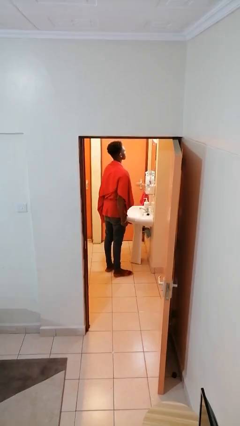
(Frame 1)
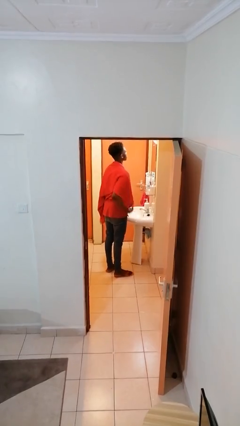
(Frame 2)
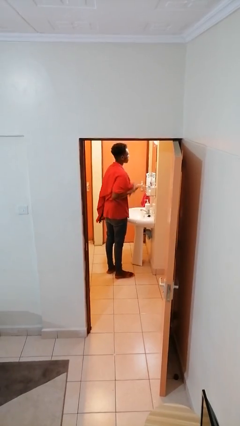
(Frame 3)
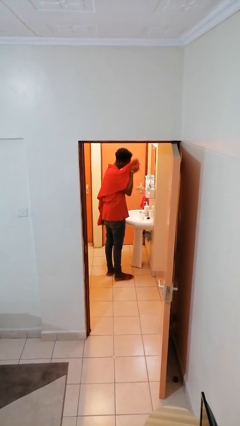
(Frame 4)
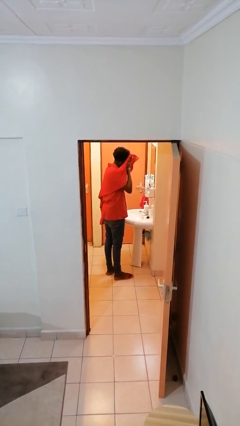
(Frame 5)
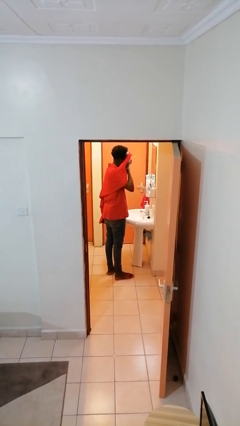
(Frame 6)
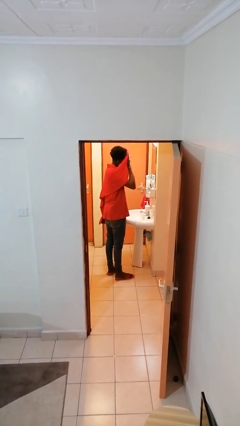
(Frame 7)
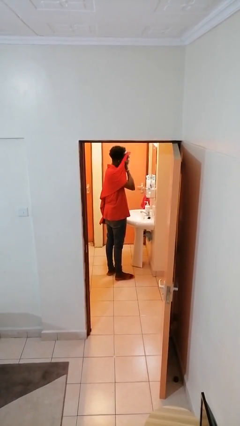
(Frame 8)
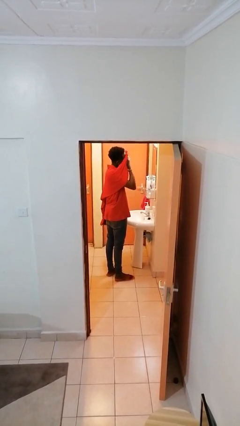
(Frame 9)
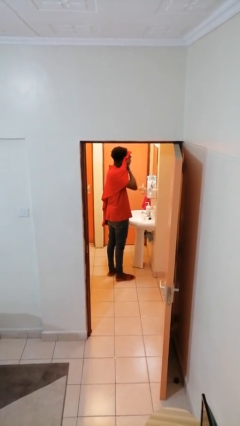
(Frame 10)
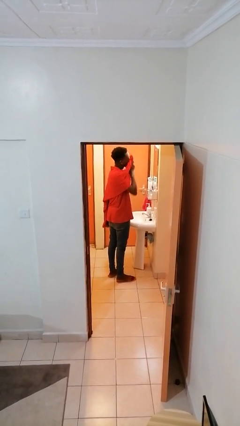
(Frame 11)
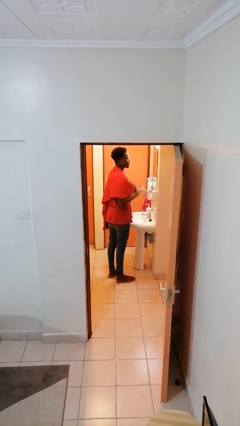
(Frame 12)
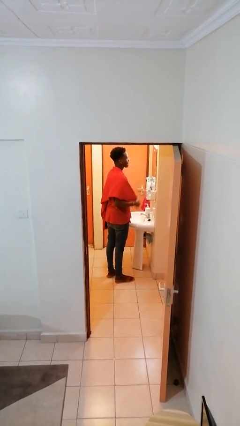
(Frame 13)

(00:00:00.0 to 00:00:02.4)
person dries face with towel

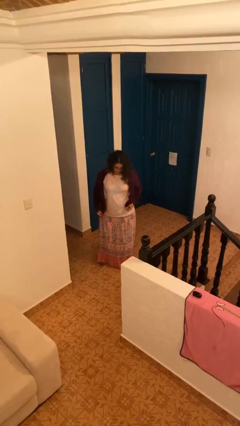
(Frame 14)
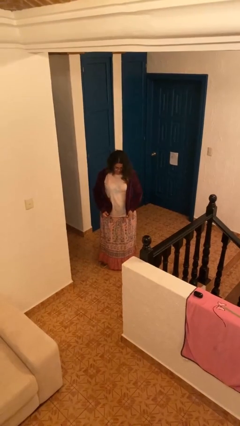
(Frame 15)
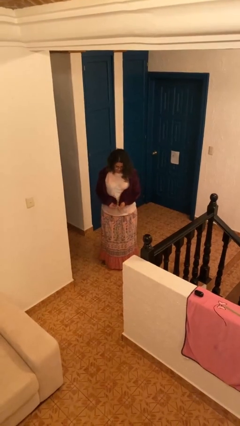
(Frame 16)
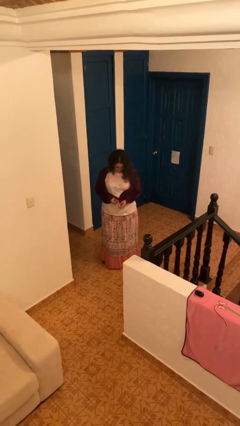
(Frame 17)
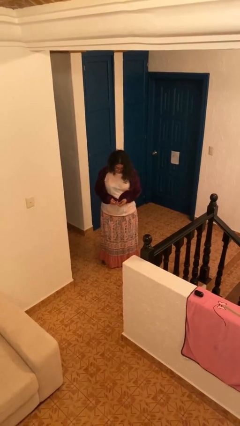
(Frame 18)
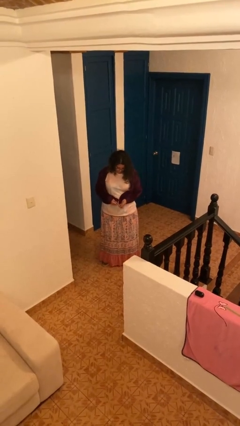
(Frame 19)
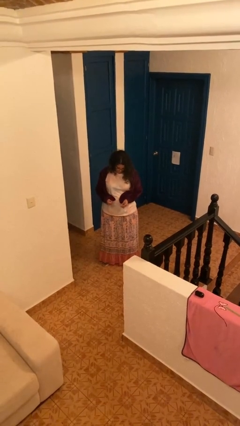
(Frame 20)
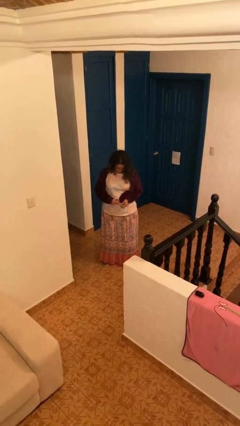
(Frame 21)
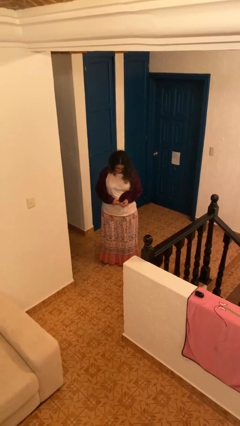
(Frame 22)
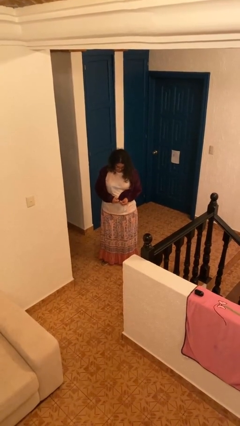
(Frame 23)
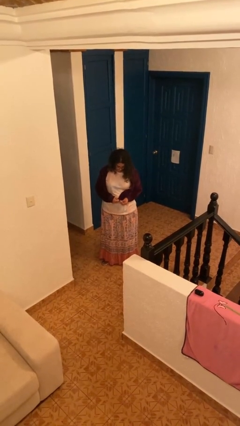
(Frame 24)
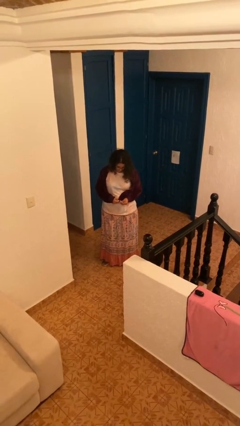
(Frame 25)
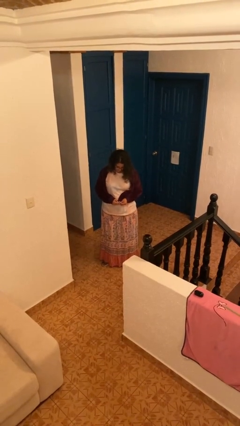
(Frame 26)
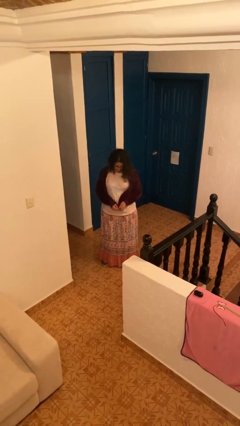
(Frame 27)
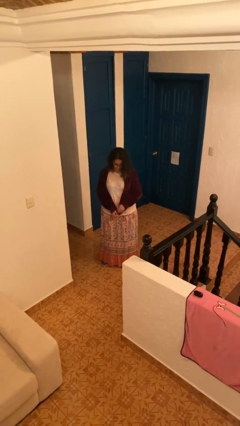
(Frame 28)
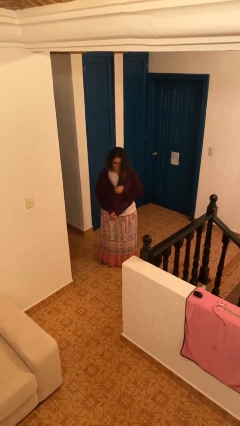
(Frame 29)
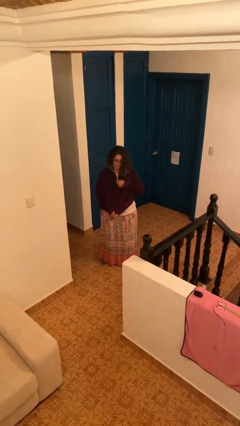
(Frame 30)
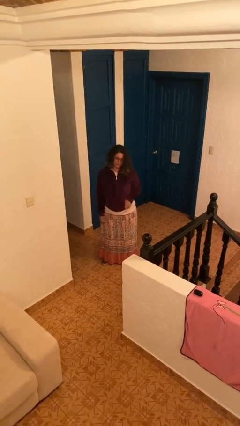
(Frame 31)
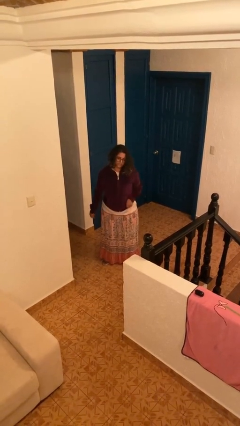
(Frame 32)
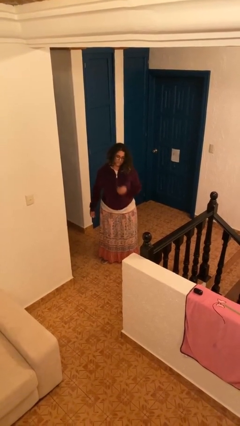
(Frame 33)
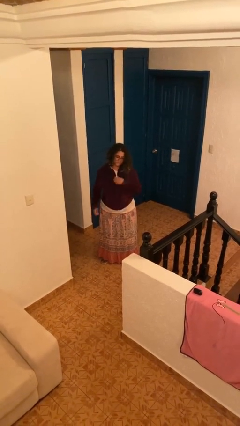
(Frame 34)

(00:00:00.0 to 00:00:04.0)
person zips up jacket

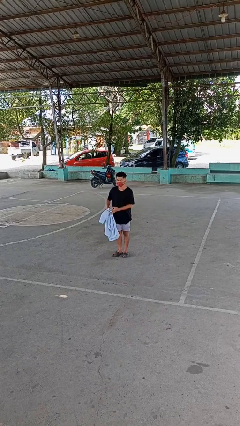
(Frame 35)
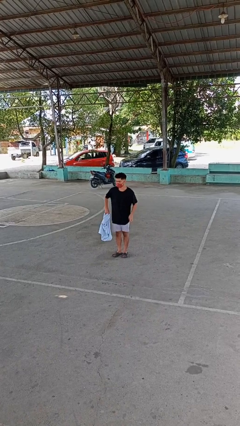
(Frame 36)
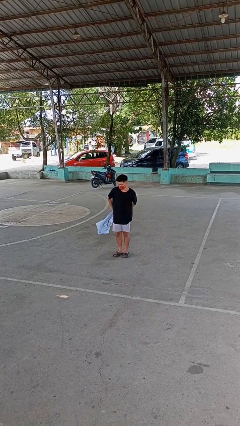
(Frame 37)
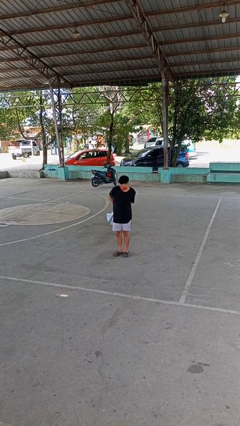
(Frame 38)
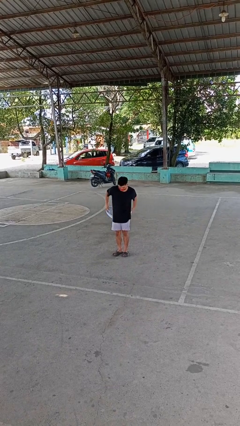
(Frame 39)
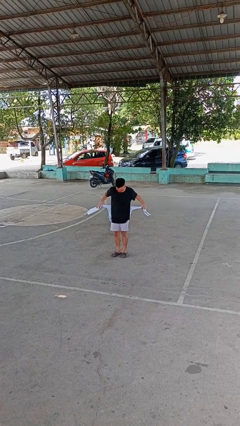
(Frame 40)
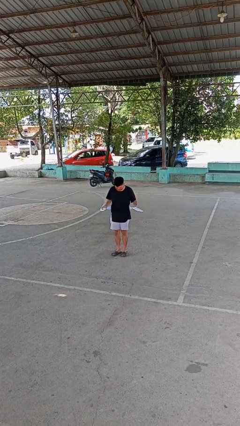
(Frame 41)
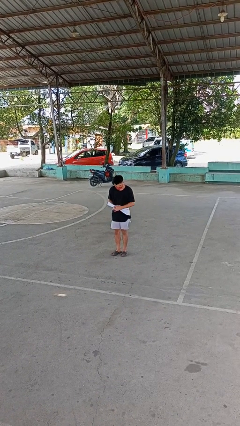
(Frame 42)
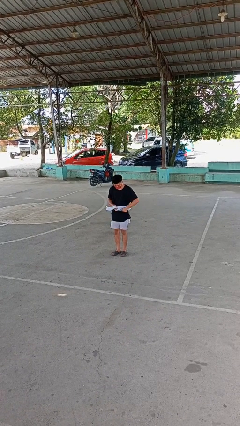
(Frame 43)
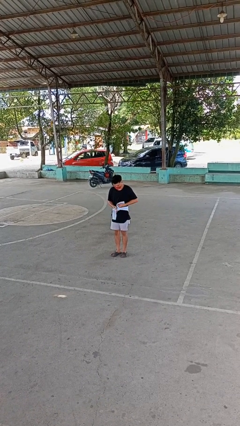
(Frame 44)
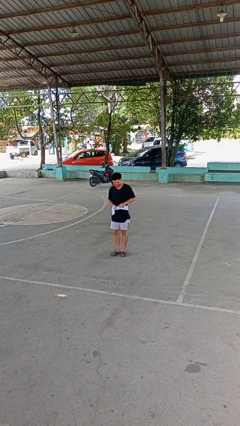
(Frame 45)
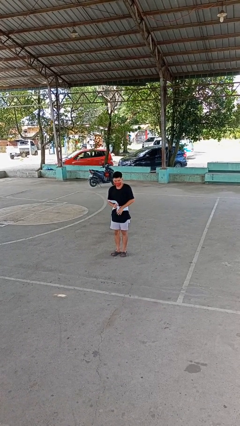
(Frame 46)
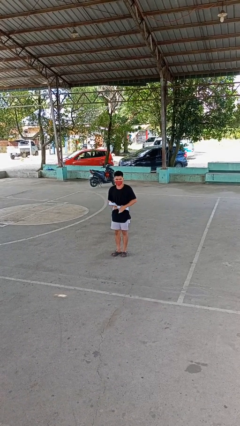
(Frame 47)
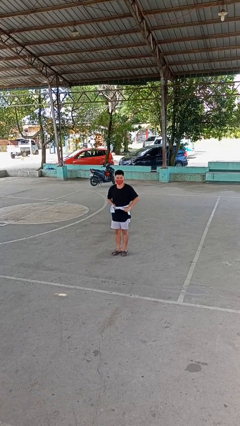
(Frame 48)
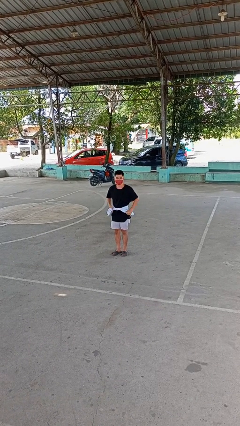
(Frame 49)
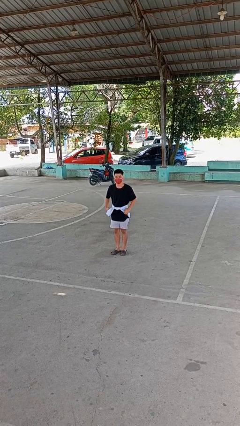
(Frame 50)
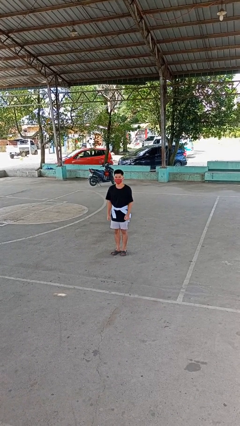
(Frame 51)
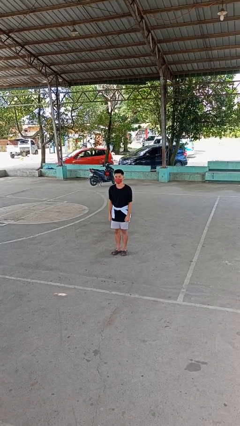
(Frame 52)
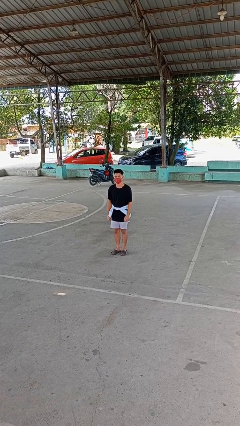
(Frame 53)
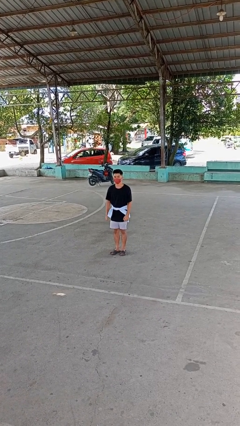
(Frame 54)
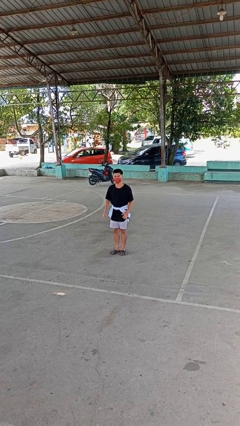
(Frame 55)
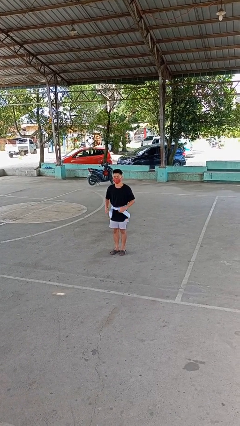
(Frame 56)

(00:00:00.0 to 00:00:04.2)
person ties jacket around waist

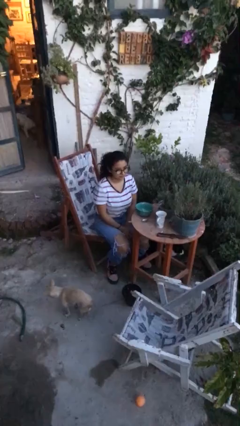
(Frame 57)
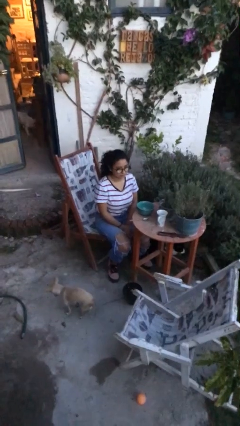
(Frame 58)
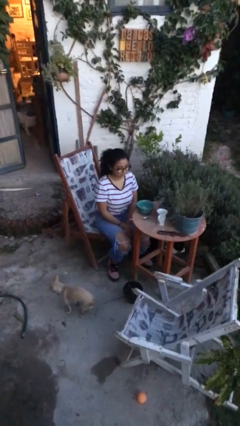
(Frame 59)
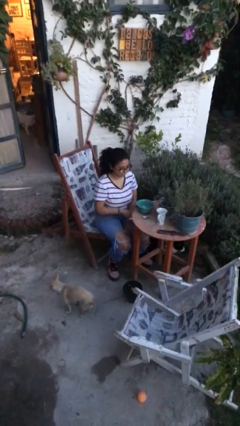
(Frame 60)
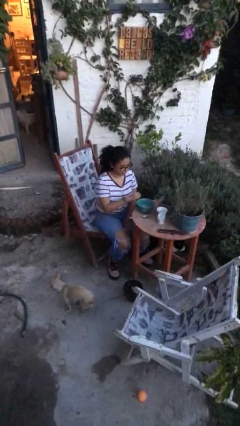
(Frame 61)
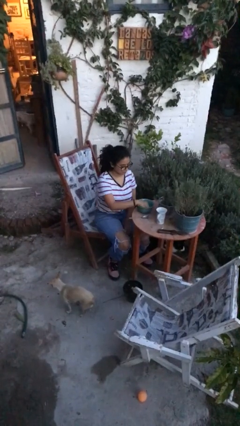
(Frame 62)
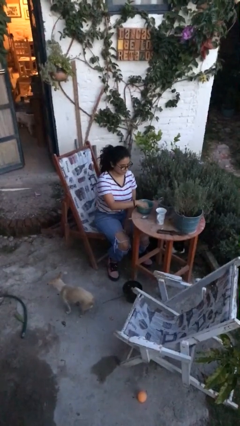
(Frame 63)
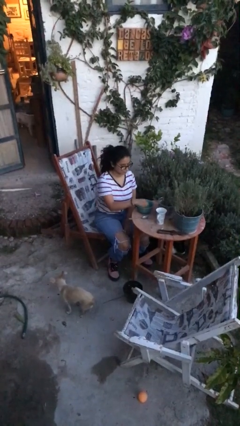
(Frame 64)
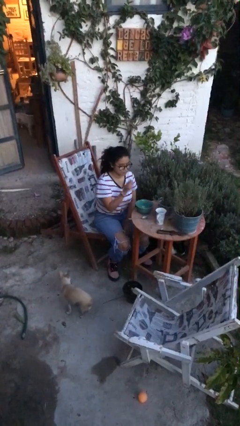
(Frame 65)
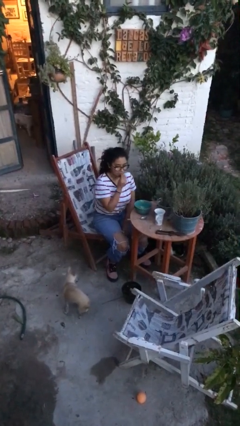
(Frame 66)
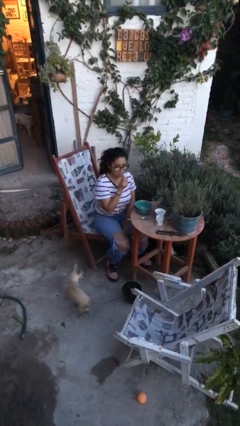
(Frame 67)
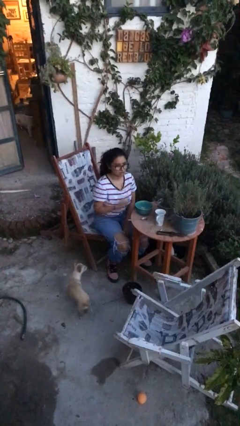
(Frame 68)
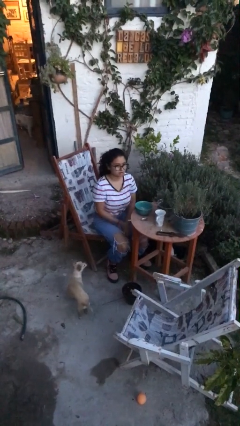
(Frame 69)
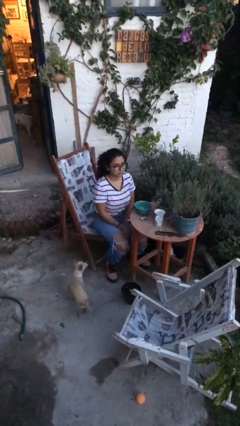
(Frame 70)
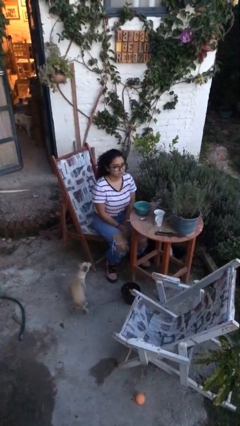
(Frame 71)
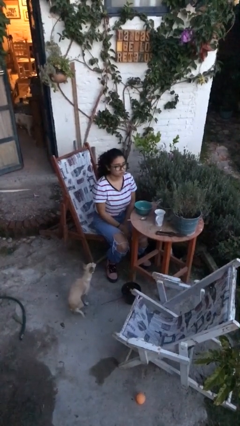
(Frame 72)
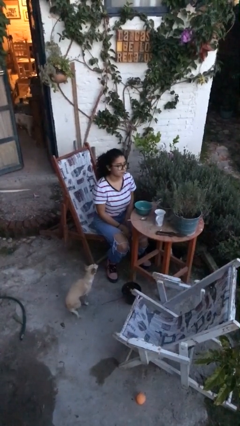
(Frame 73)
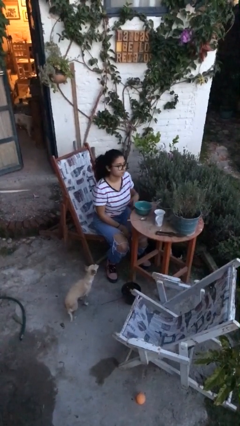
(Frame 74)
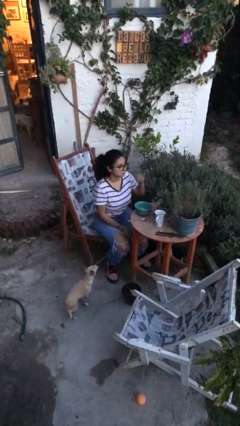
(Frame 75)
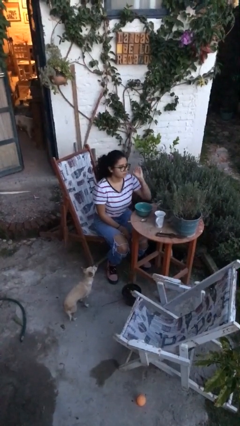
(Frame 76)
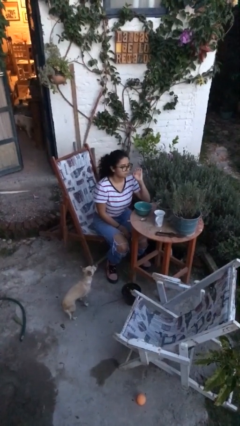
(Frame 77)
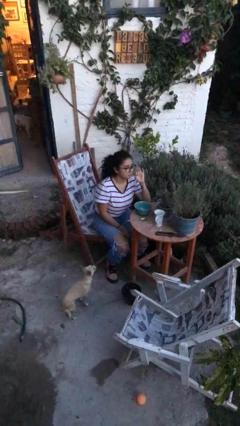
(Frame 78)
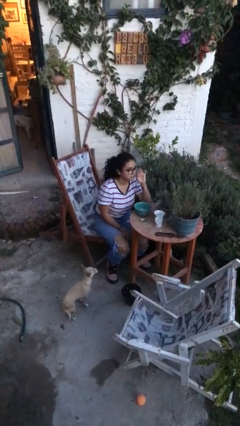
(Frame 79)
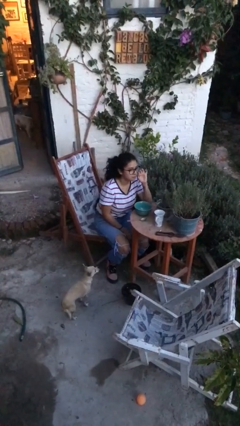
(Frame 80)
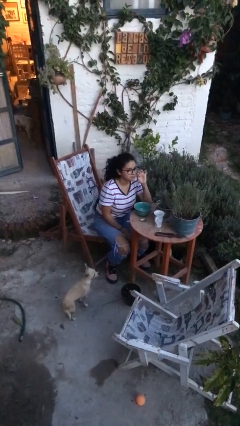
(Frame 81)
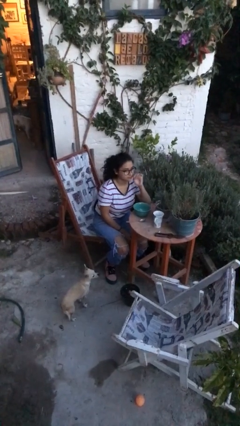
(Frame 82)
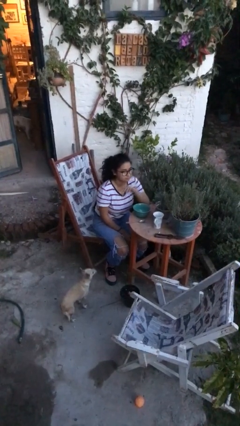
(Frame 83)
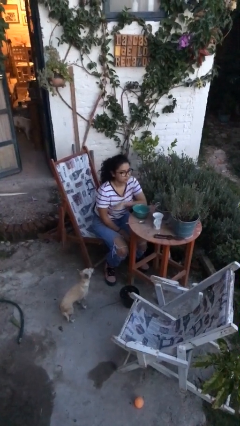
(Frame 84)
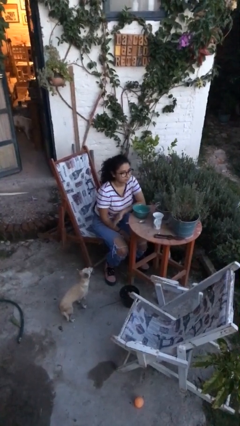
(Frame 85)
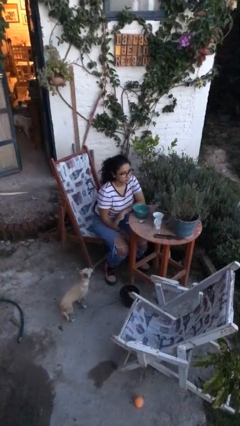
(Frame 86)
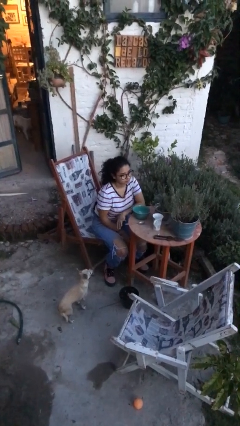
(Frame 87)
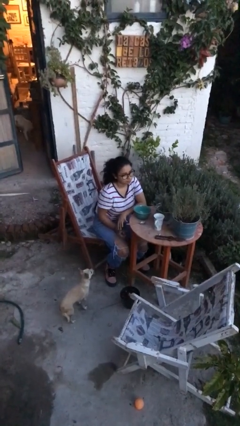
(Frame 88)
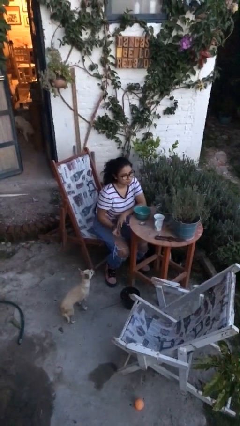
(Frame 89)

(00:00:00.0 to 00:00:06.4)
person eats with hands

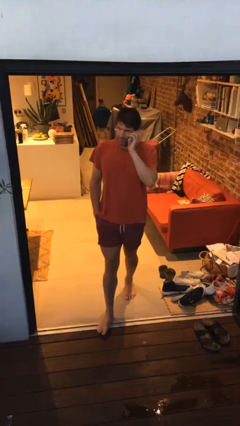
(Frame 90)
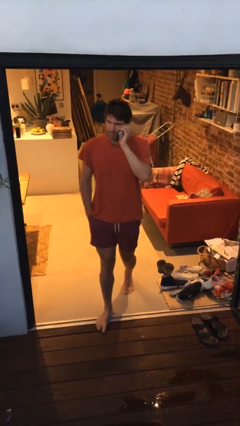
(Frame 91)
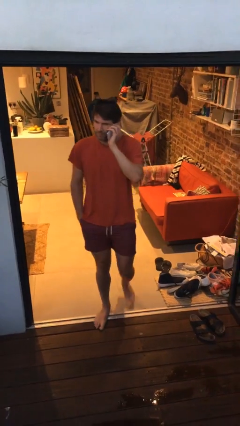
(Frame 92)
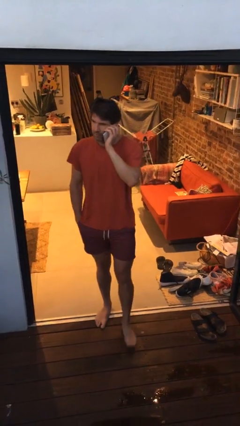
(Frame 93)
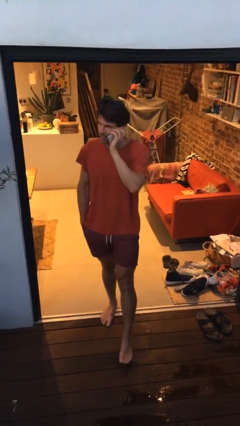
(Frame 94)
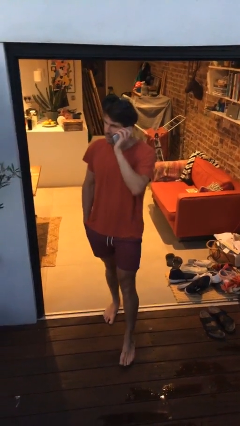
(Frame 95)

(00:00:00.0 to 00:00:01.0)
person enters scene through structure
